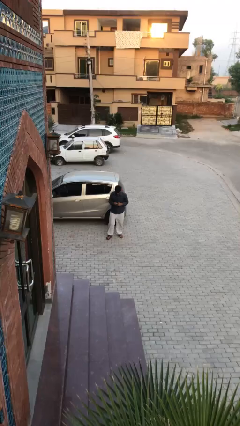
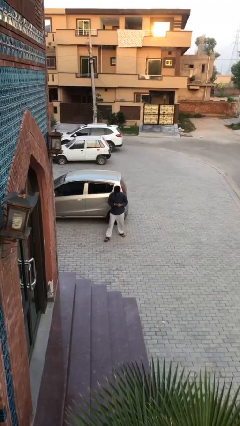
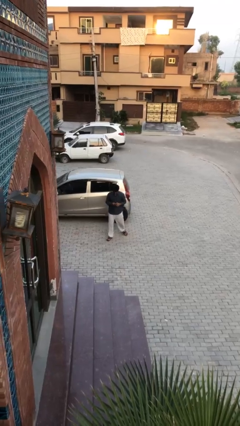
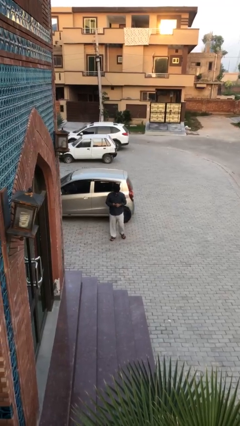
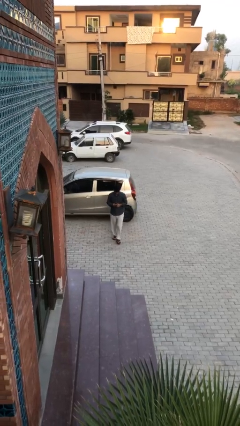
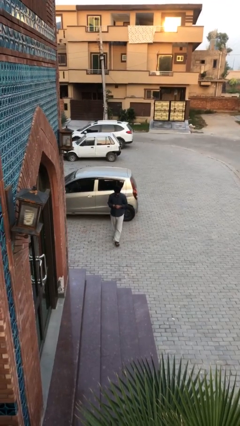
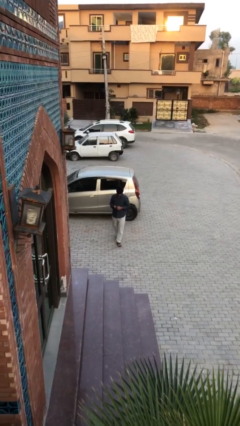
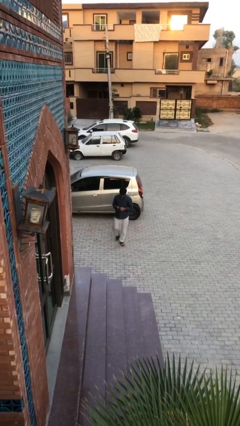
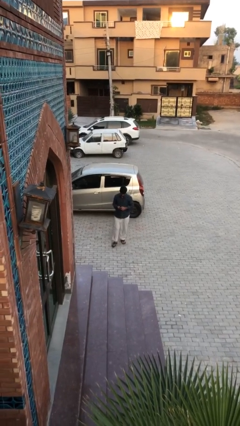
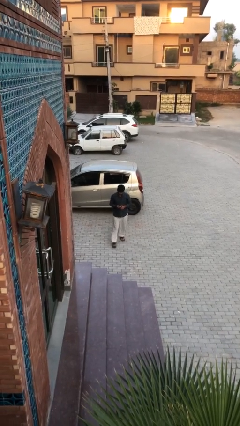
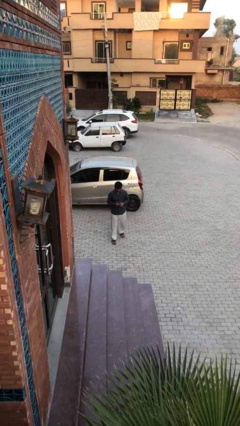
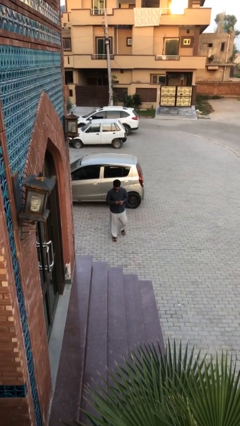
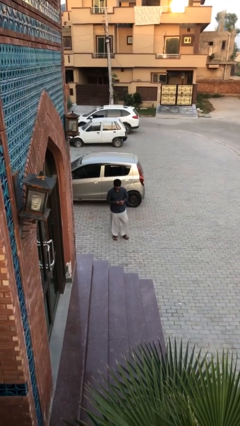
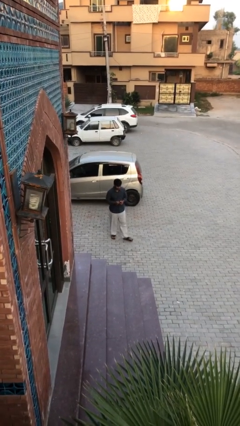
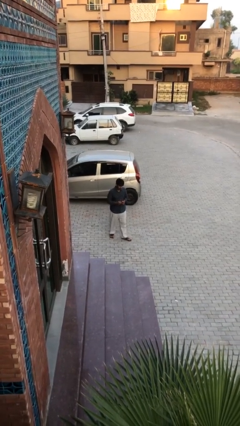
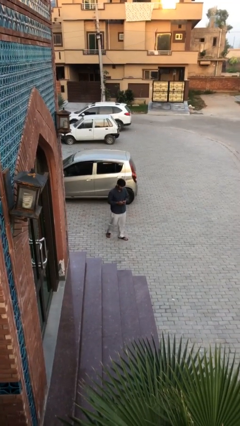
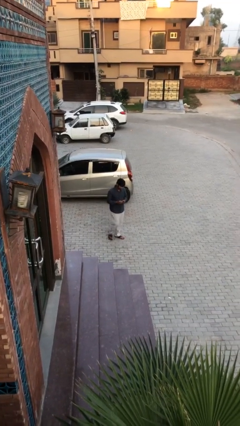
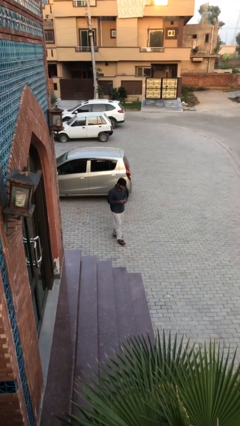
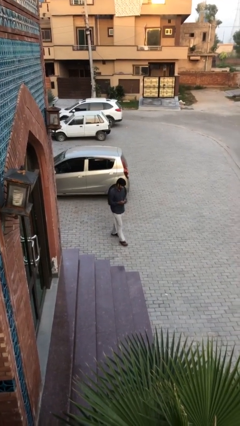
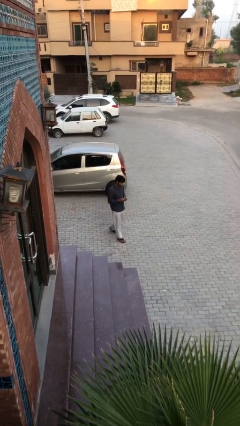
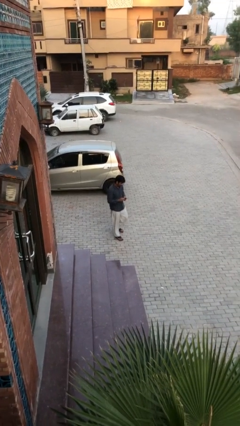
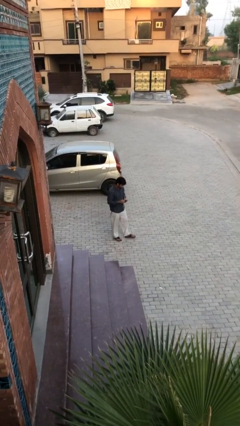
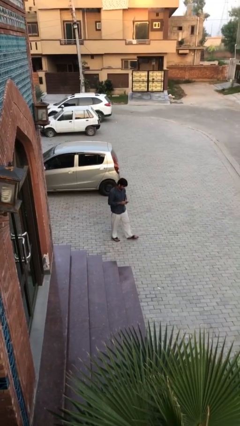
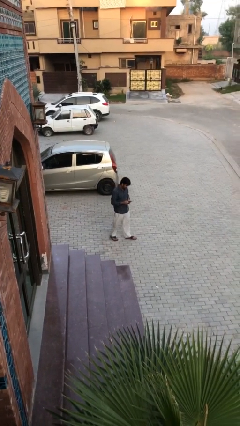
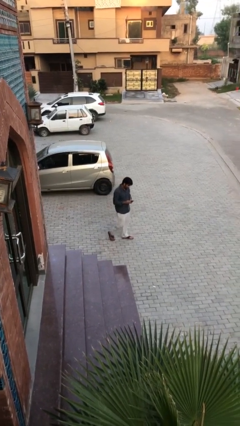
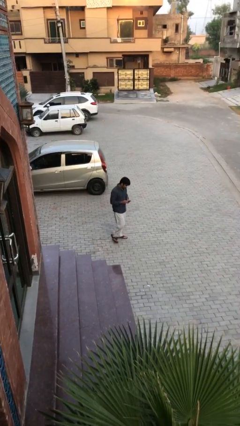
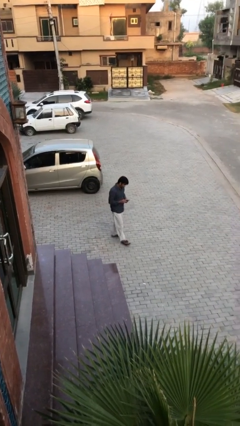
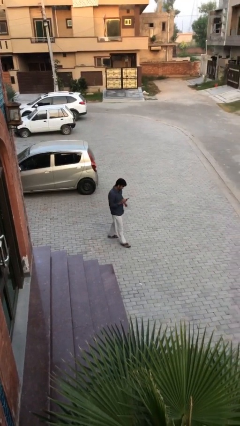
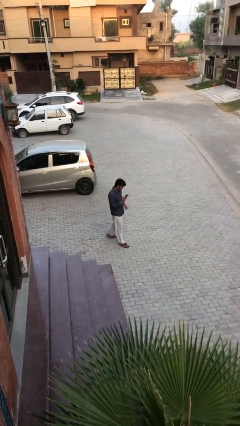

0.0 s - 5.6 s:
person texts on phone

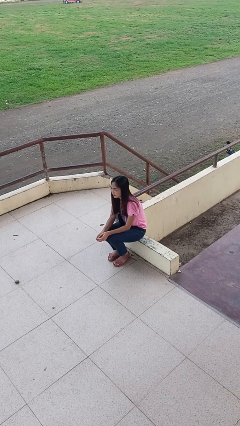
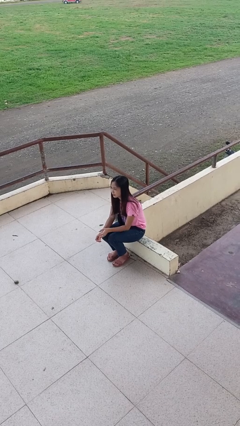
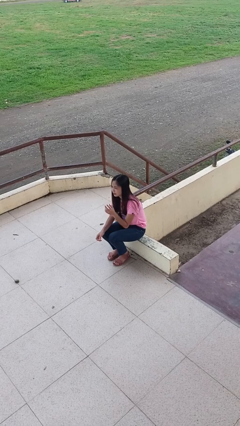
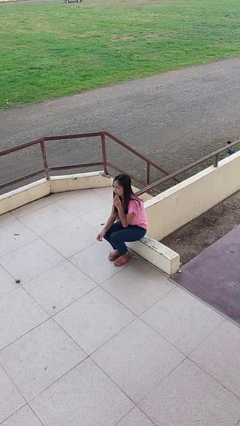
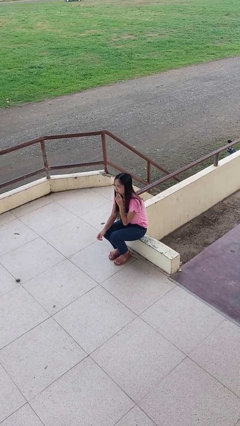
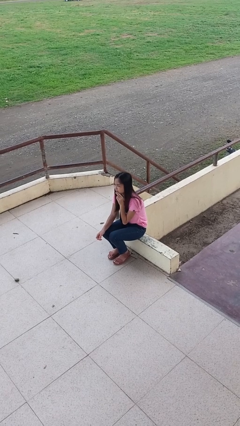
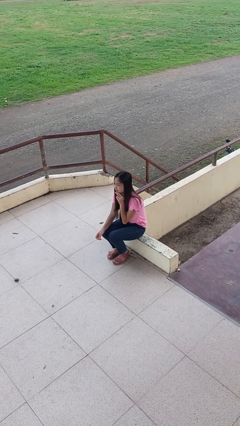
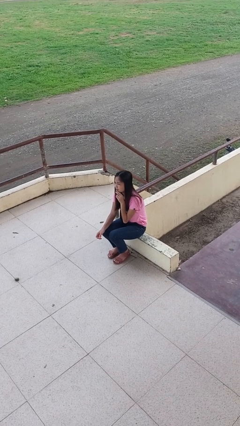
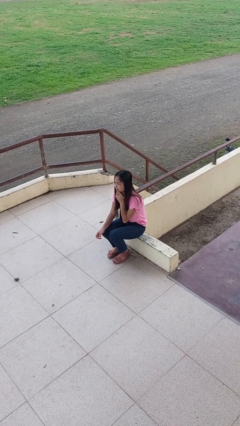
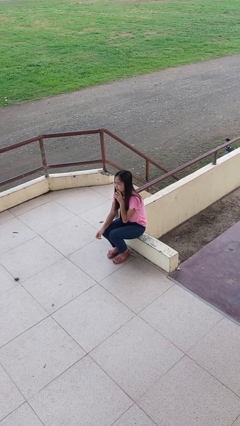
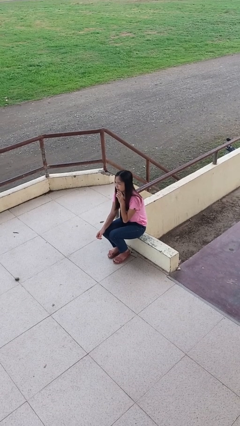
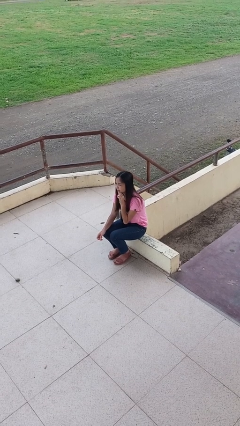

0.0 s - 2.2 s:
person strokes chin

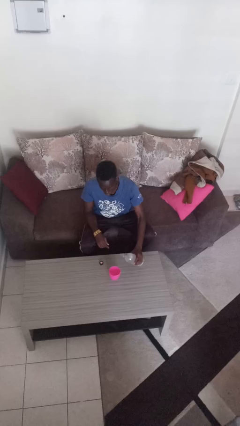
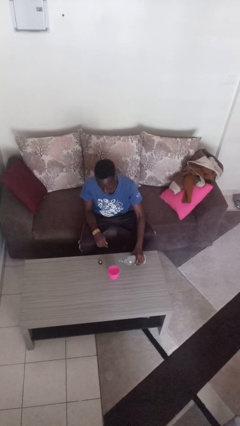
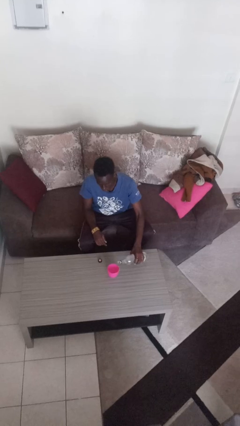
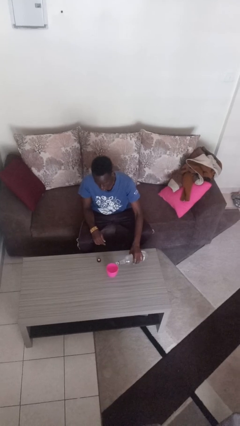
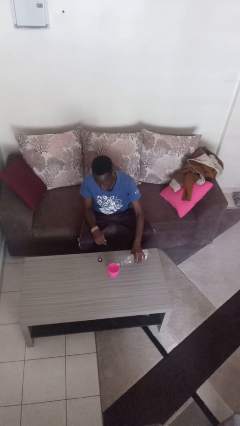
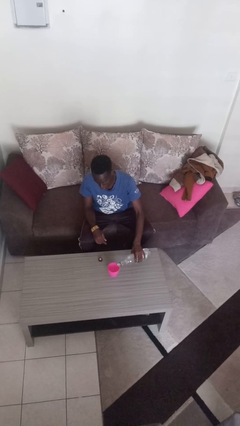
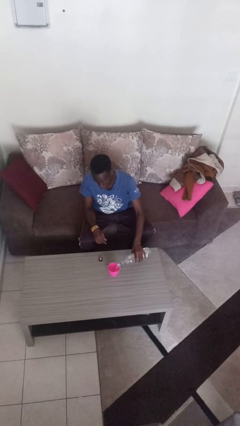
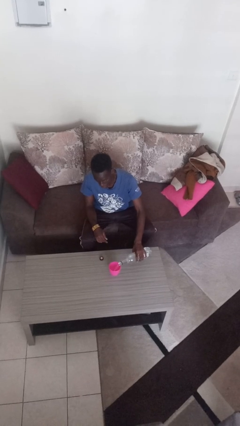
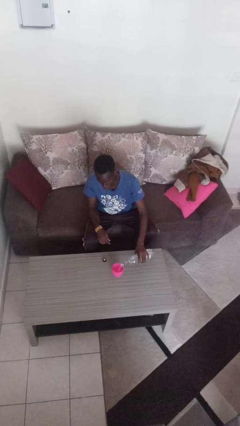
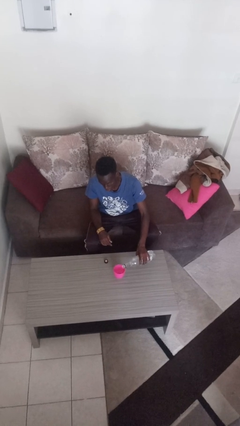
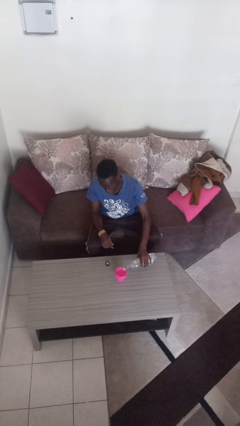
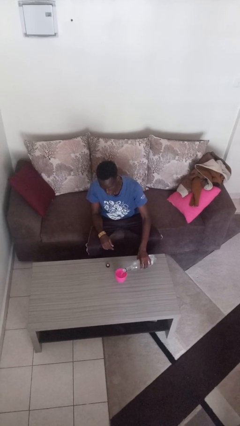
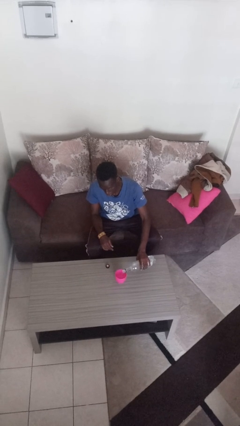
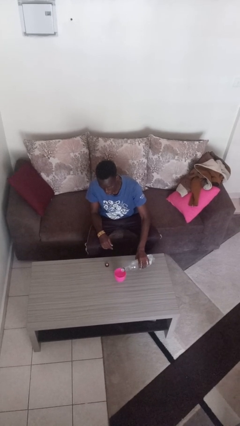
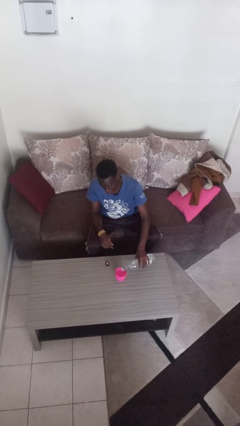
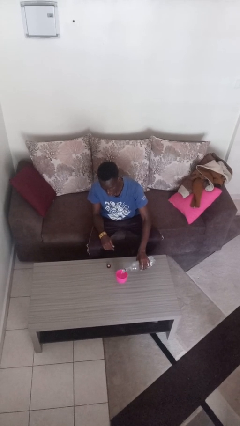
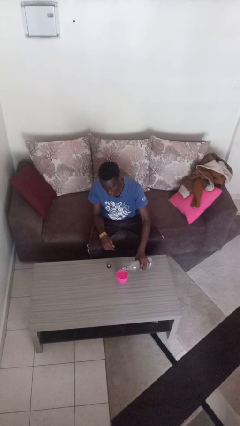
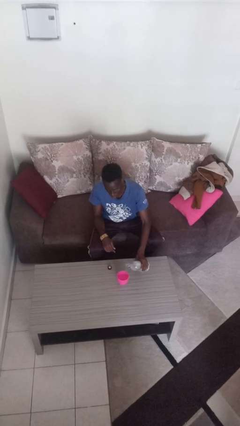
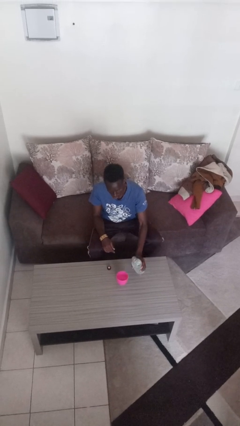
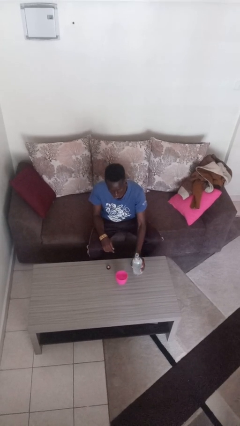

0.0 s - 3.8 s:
person pours liquid into cup

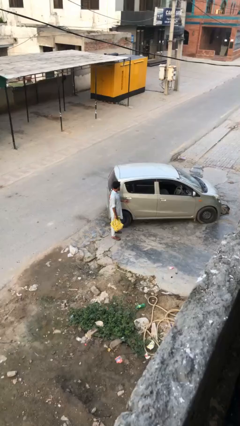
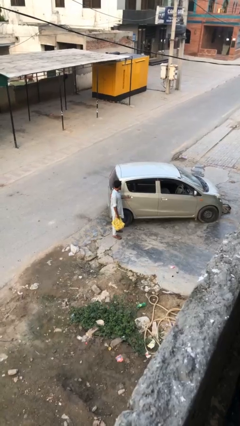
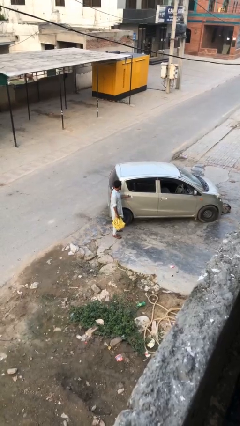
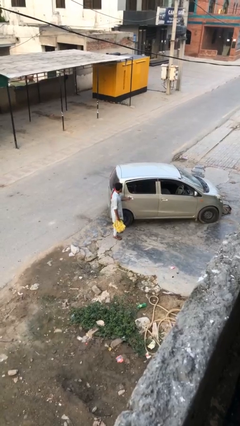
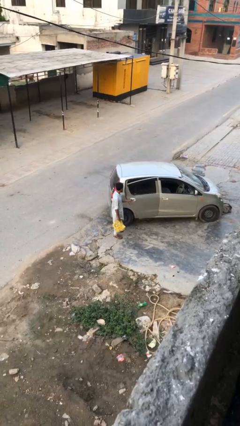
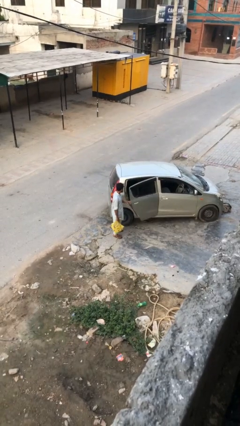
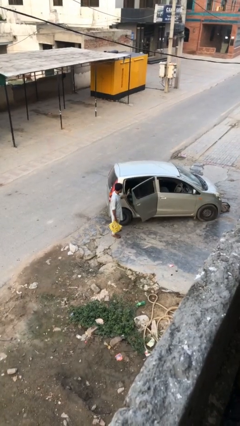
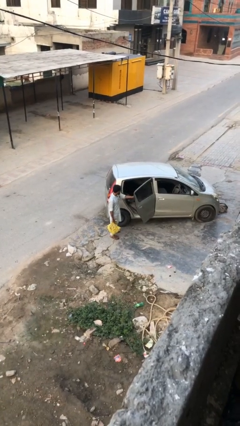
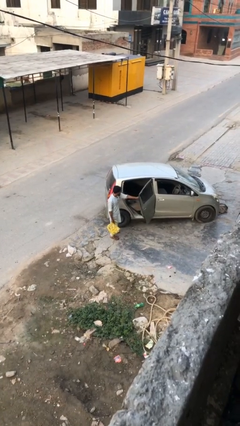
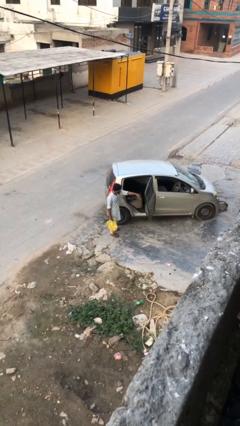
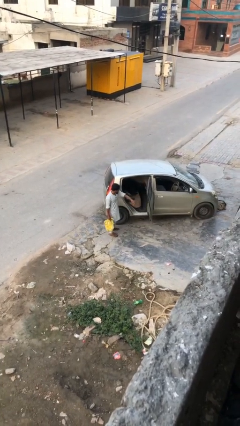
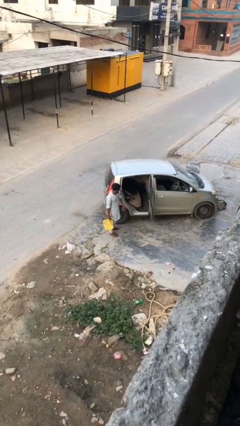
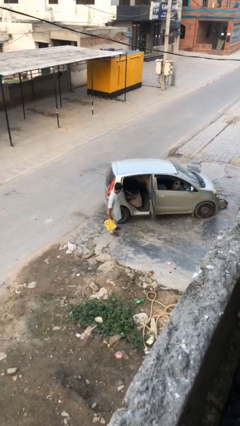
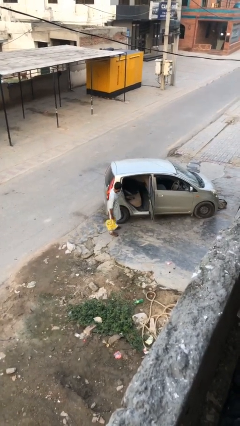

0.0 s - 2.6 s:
person opens car door

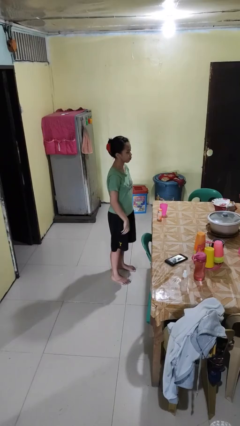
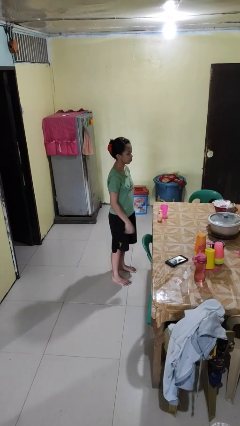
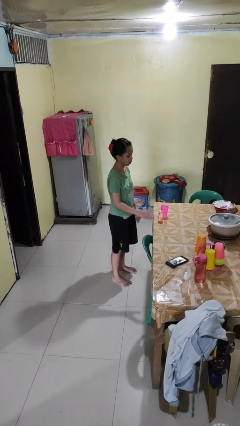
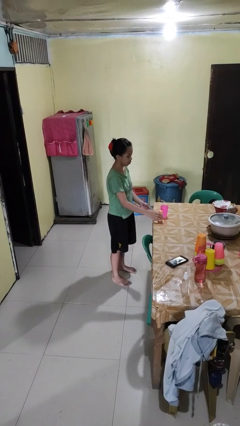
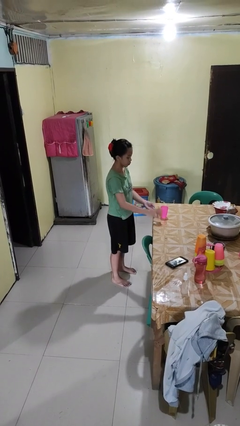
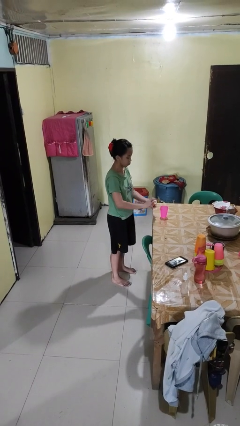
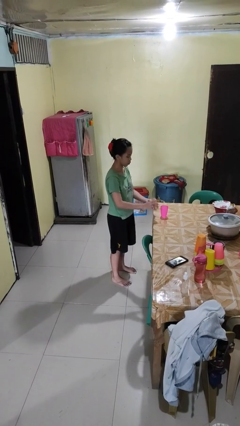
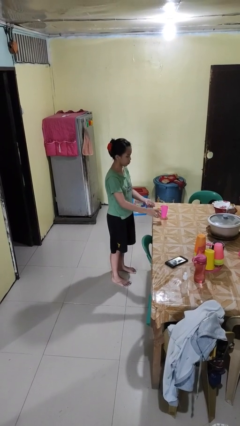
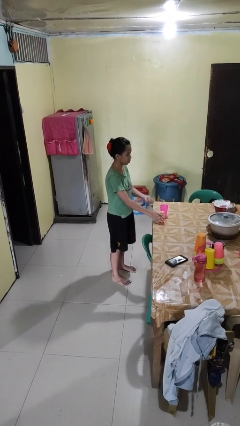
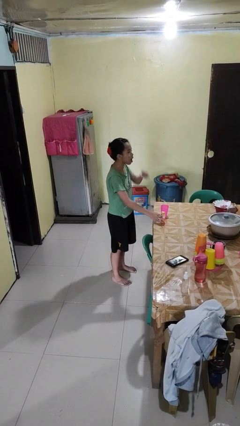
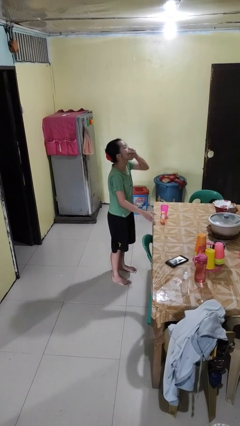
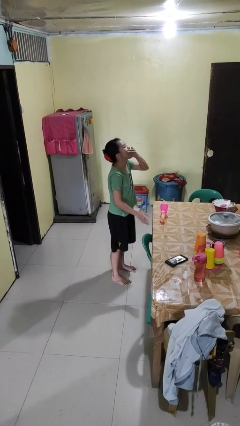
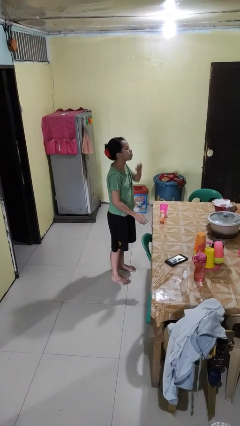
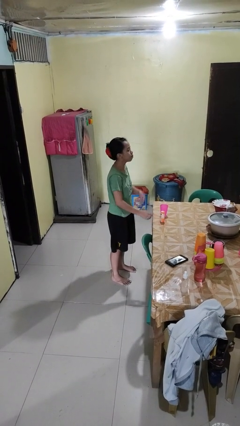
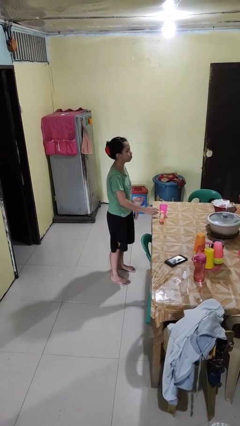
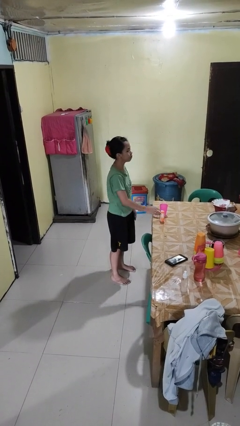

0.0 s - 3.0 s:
person takes medicine pills
